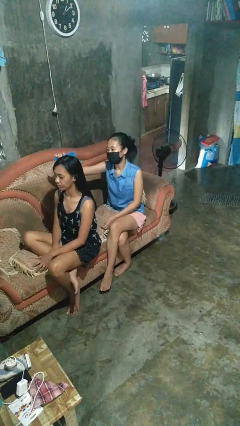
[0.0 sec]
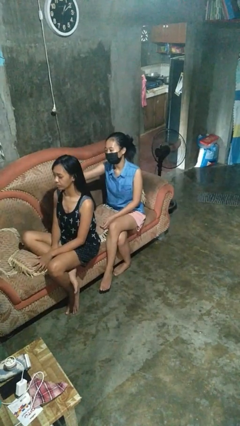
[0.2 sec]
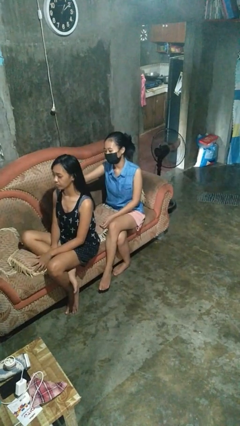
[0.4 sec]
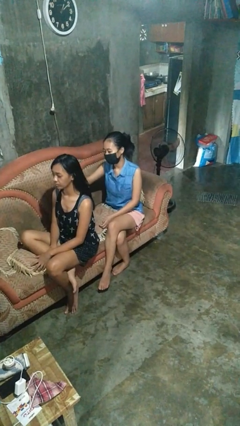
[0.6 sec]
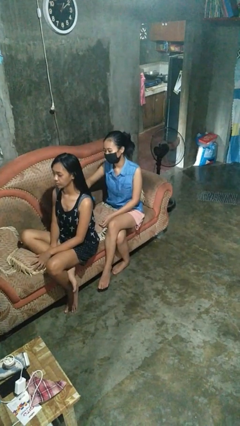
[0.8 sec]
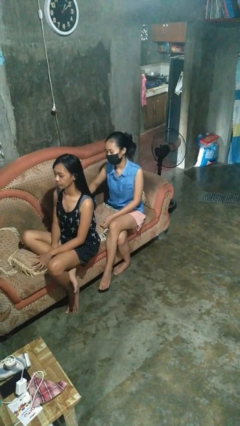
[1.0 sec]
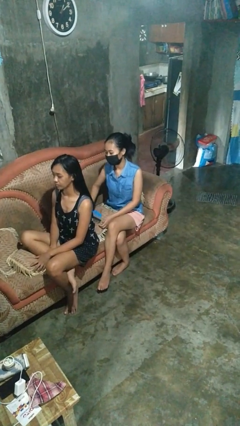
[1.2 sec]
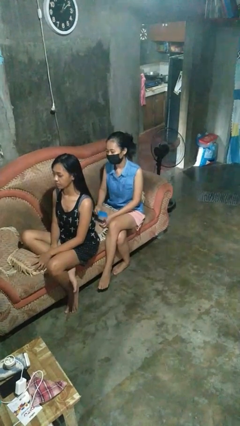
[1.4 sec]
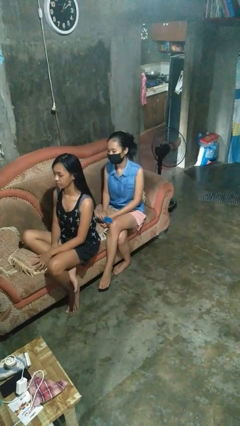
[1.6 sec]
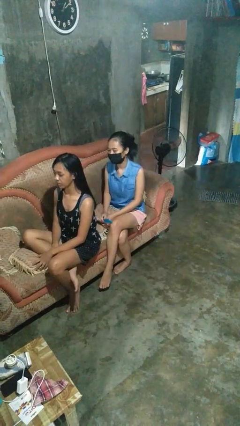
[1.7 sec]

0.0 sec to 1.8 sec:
person brushes hair of person

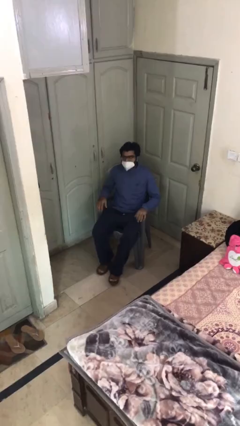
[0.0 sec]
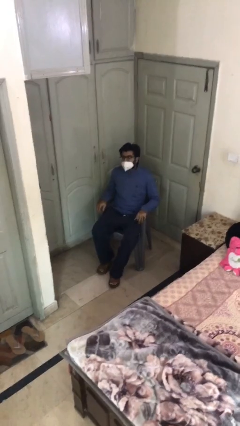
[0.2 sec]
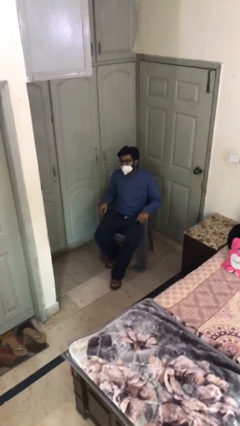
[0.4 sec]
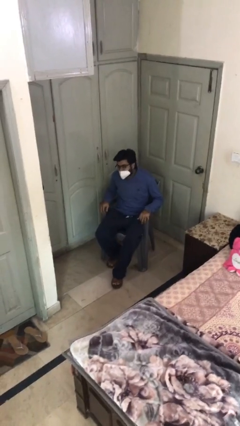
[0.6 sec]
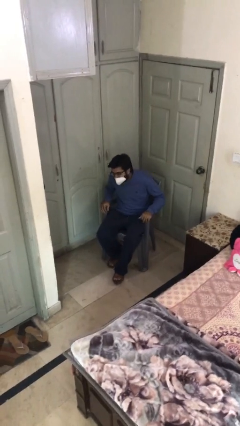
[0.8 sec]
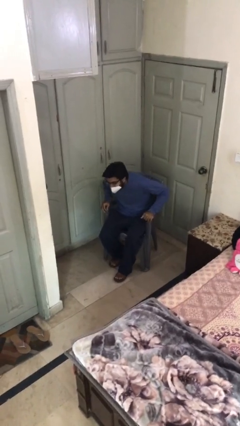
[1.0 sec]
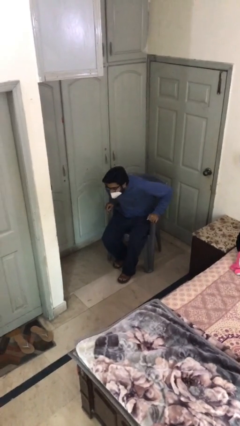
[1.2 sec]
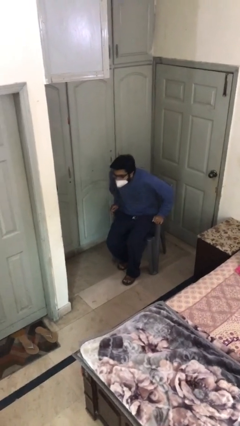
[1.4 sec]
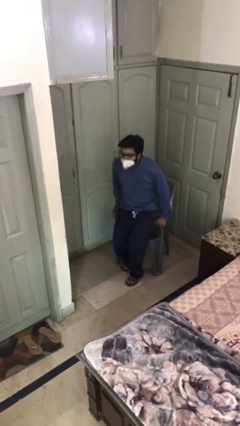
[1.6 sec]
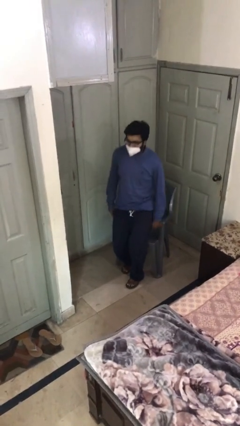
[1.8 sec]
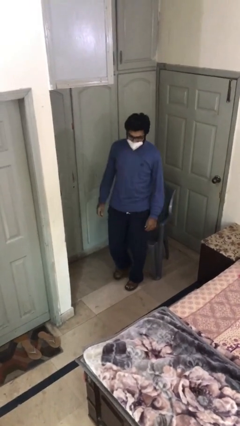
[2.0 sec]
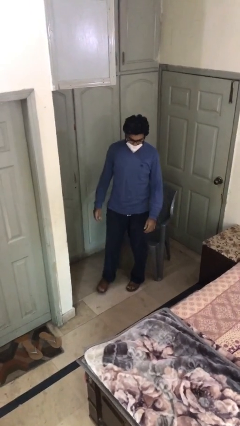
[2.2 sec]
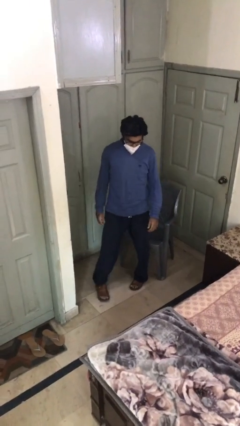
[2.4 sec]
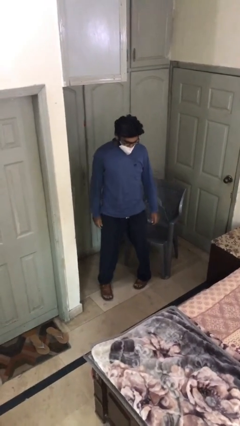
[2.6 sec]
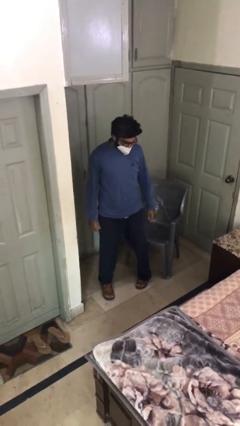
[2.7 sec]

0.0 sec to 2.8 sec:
person stands up

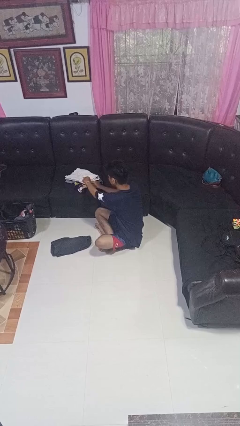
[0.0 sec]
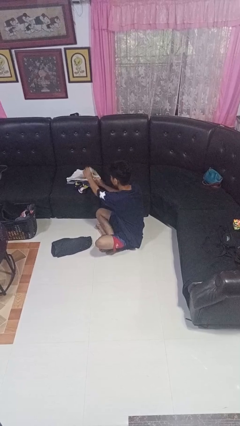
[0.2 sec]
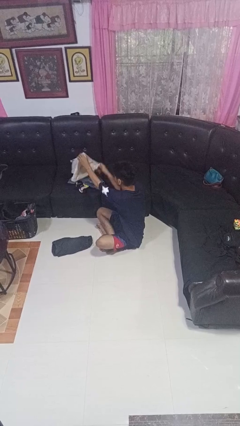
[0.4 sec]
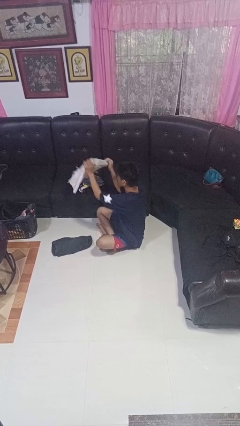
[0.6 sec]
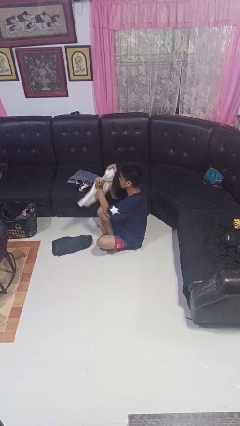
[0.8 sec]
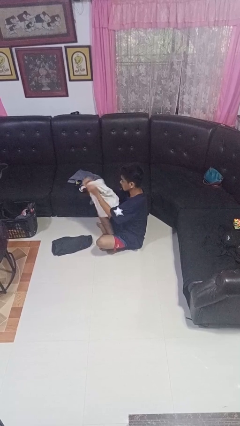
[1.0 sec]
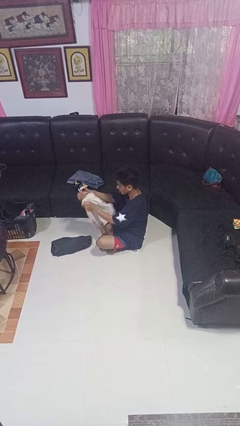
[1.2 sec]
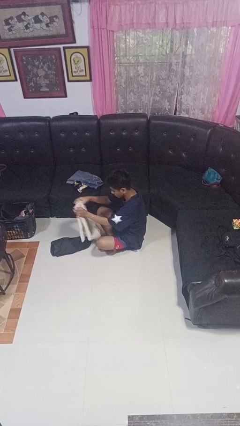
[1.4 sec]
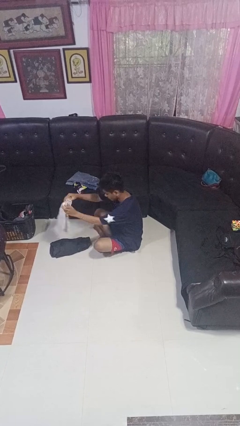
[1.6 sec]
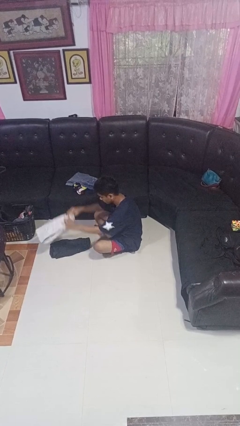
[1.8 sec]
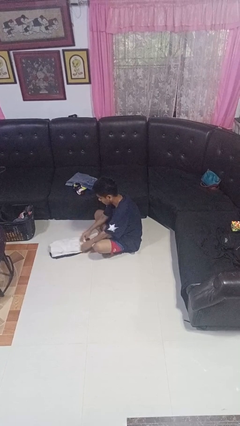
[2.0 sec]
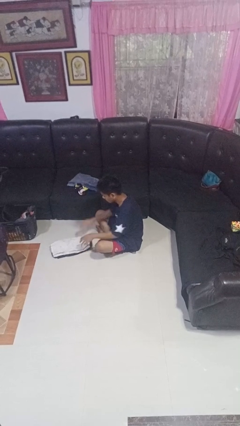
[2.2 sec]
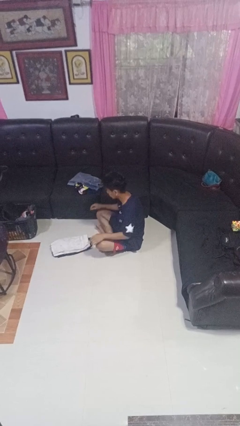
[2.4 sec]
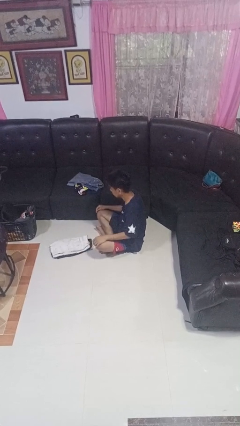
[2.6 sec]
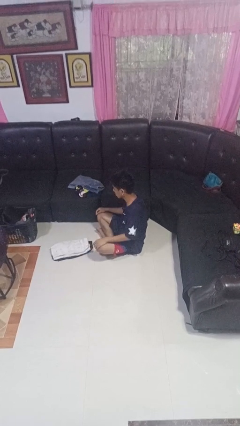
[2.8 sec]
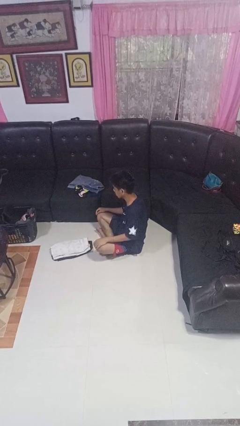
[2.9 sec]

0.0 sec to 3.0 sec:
person folds pants

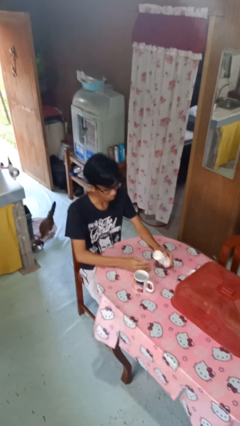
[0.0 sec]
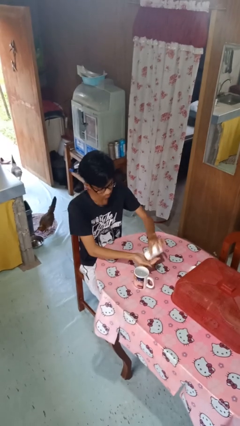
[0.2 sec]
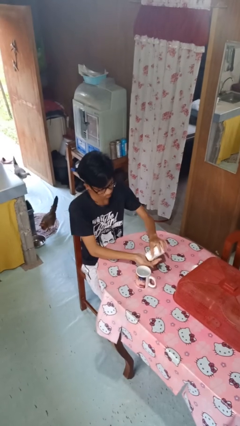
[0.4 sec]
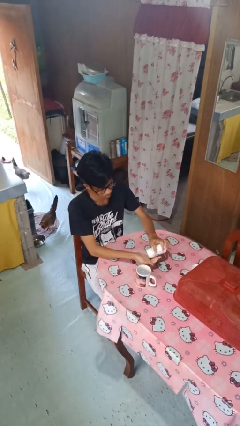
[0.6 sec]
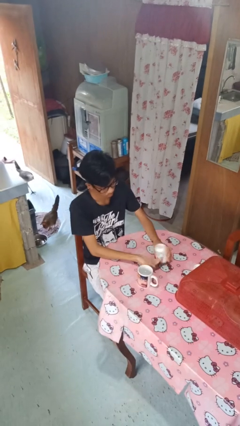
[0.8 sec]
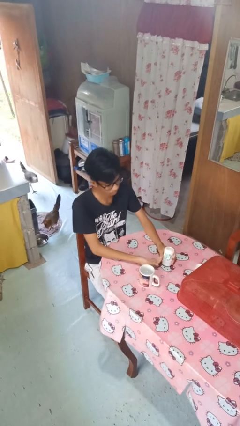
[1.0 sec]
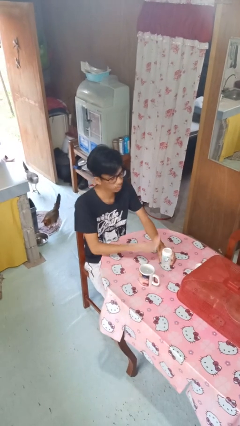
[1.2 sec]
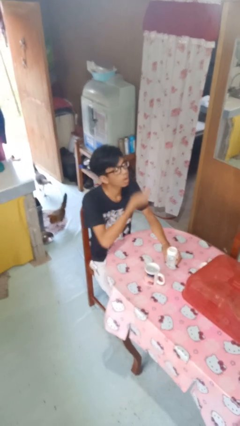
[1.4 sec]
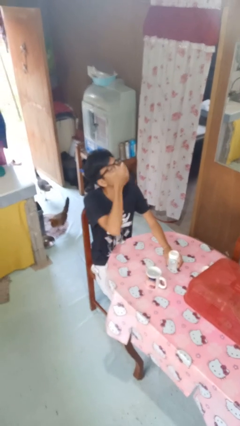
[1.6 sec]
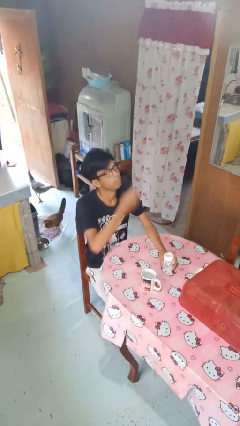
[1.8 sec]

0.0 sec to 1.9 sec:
person takes medicine pills

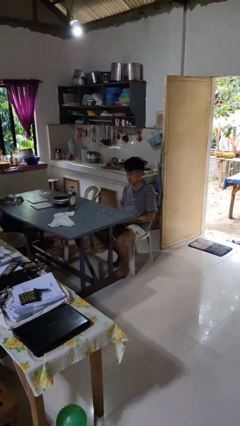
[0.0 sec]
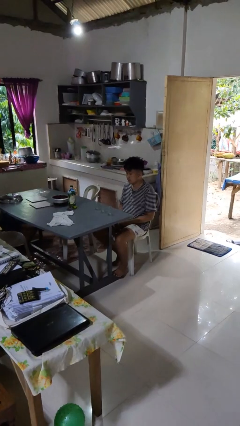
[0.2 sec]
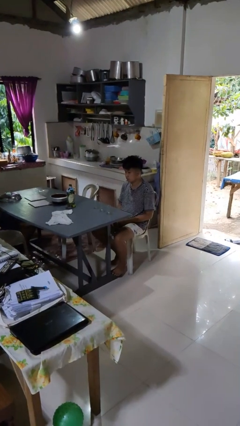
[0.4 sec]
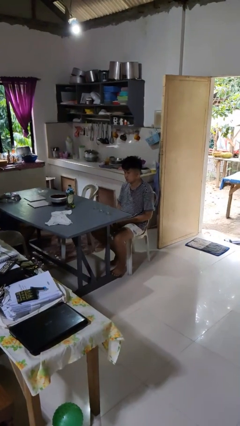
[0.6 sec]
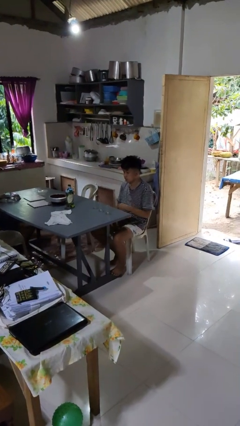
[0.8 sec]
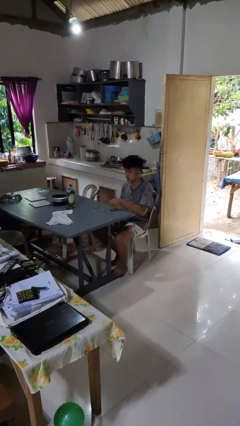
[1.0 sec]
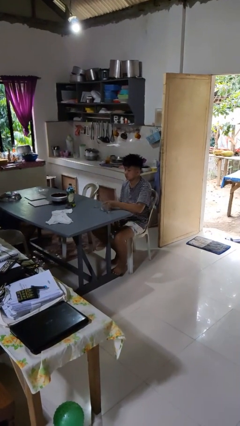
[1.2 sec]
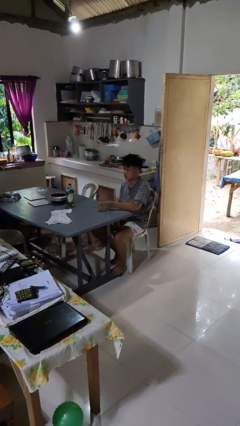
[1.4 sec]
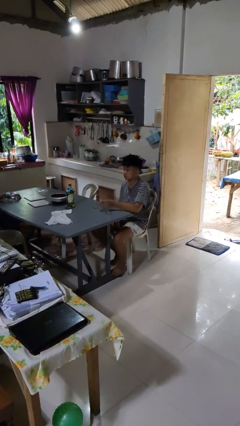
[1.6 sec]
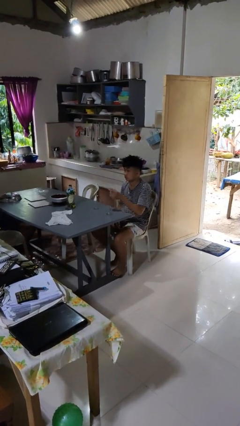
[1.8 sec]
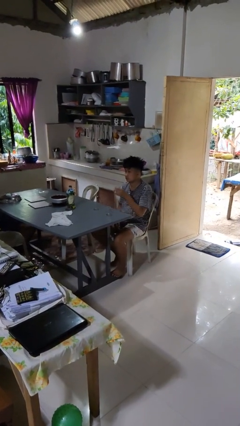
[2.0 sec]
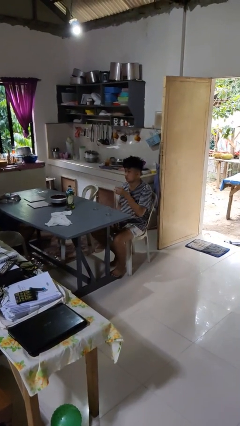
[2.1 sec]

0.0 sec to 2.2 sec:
person picks up object from table

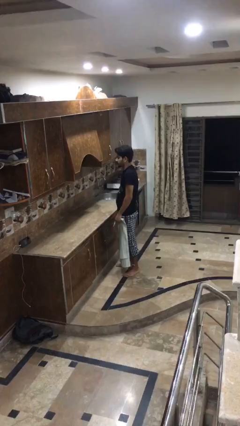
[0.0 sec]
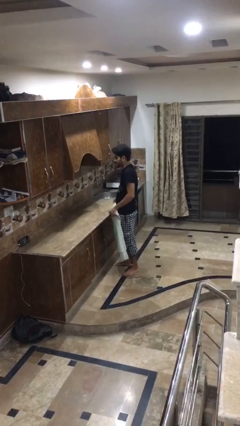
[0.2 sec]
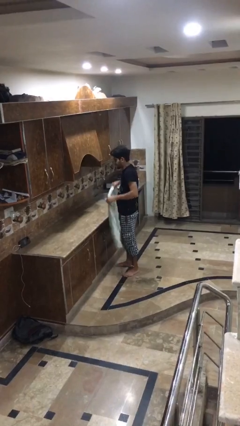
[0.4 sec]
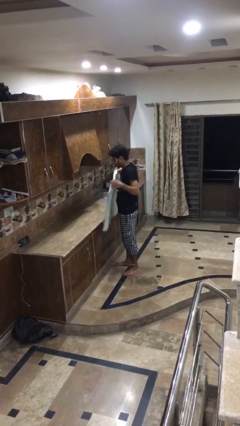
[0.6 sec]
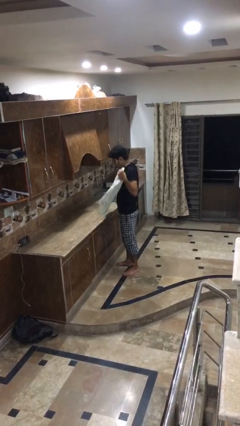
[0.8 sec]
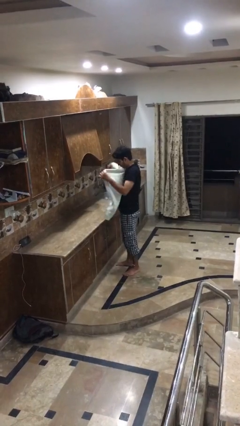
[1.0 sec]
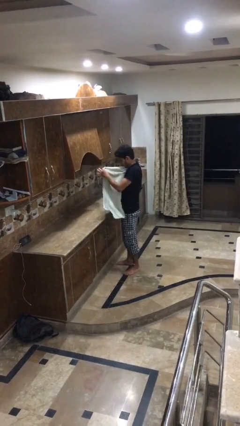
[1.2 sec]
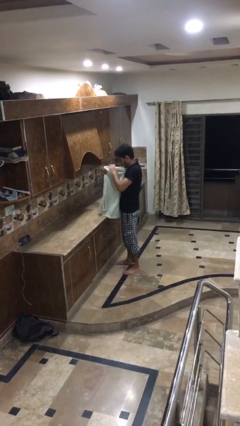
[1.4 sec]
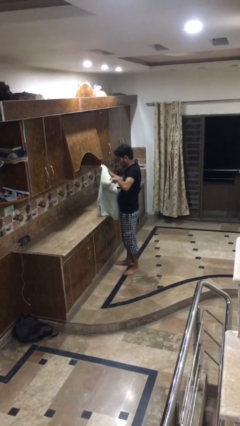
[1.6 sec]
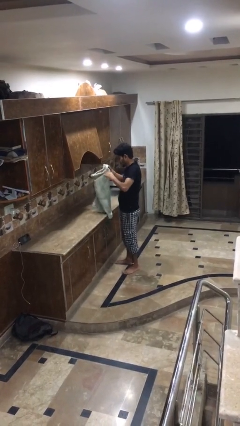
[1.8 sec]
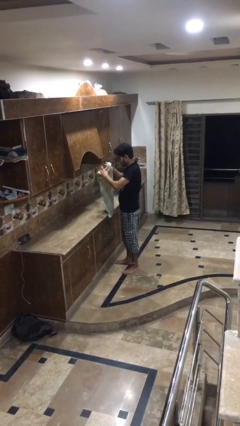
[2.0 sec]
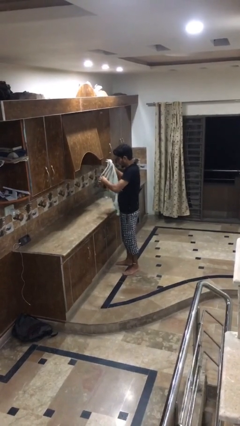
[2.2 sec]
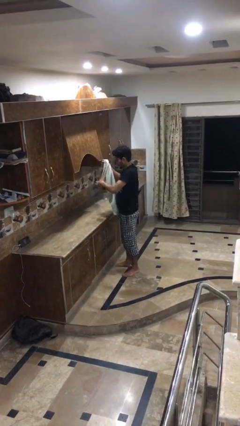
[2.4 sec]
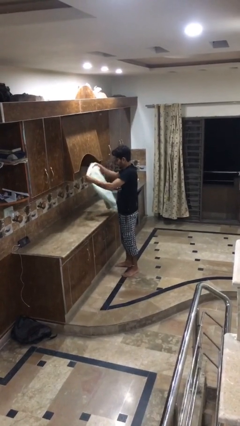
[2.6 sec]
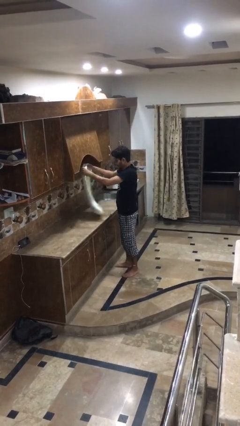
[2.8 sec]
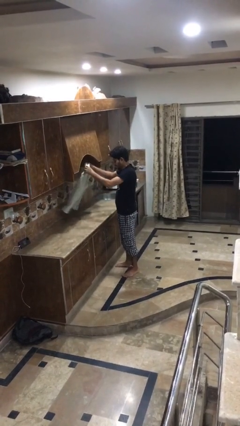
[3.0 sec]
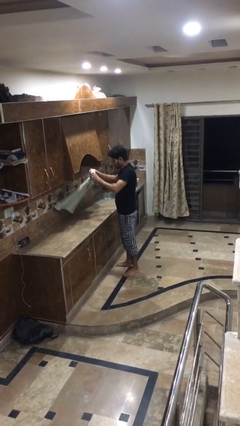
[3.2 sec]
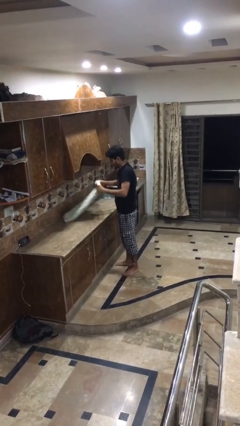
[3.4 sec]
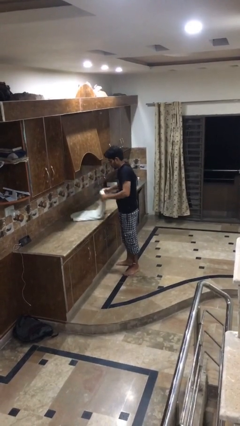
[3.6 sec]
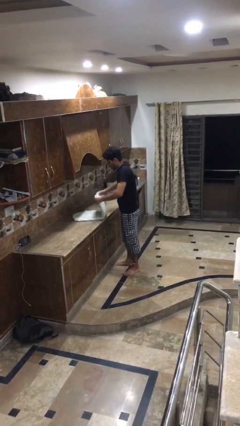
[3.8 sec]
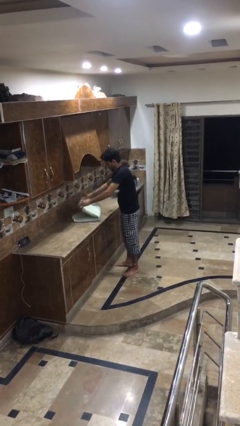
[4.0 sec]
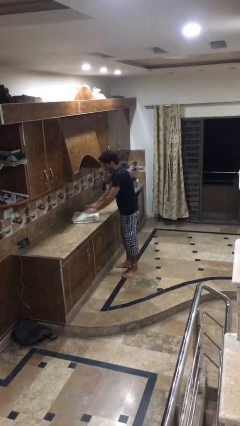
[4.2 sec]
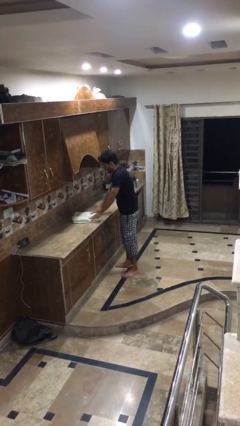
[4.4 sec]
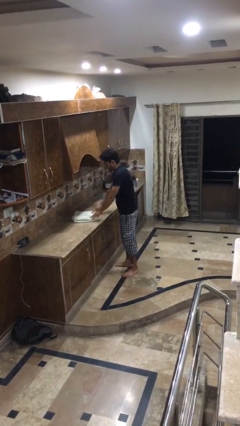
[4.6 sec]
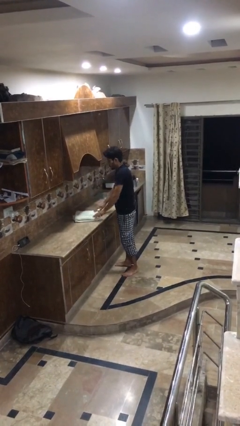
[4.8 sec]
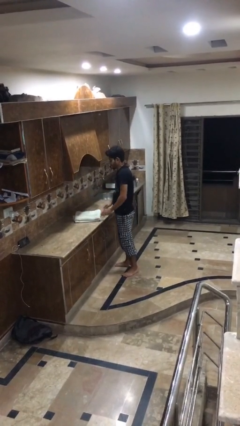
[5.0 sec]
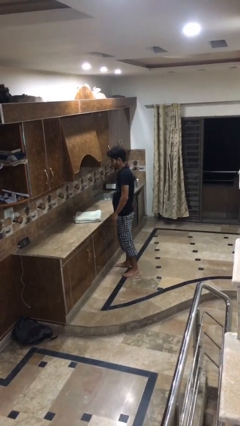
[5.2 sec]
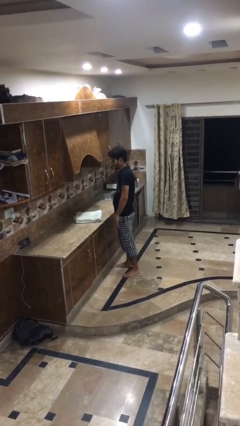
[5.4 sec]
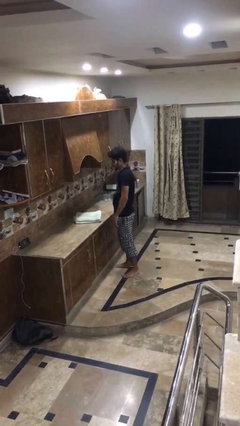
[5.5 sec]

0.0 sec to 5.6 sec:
person folds towel
